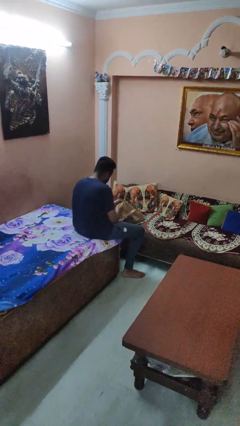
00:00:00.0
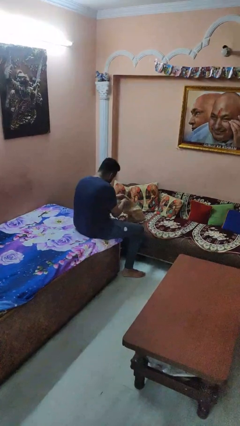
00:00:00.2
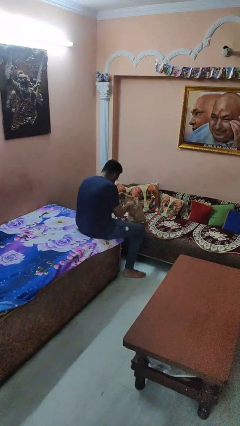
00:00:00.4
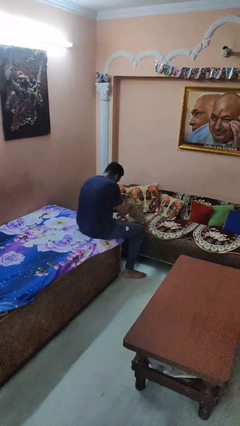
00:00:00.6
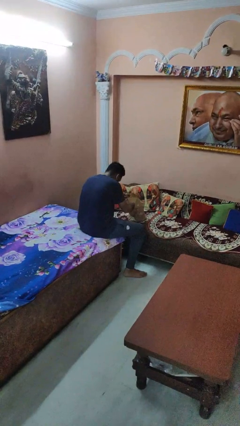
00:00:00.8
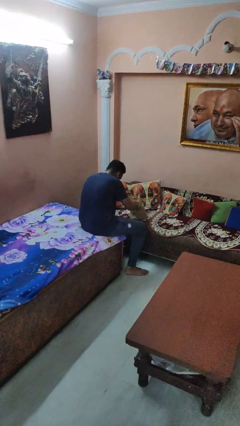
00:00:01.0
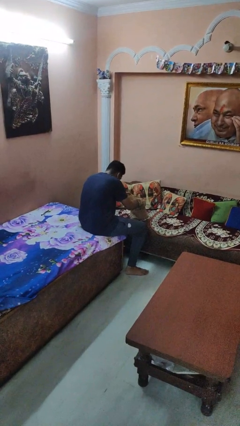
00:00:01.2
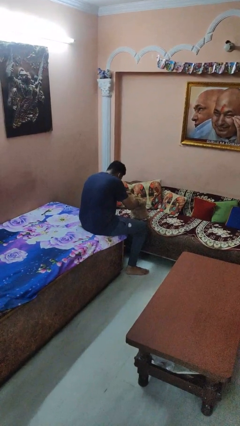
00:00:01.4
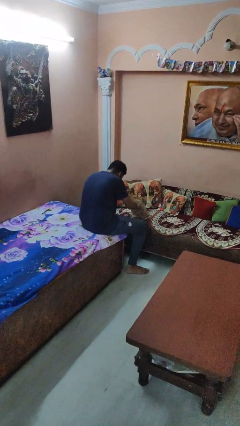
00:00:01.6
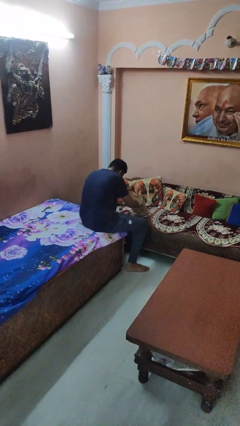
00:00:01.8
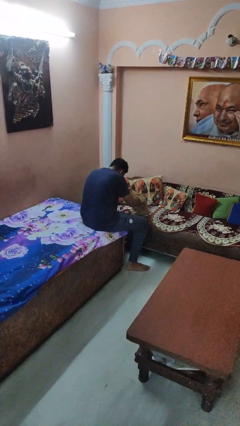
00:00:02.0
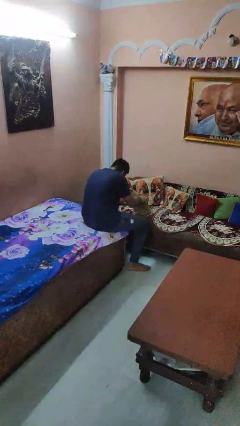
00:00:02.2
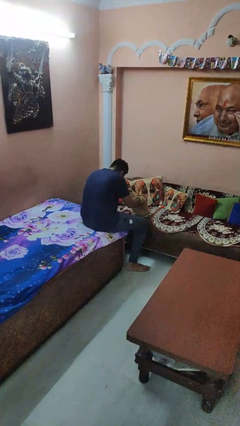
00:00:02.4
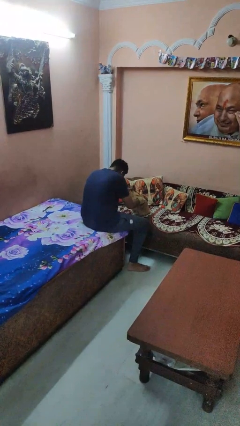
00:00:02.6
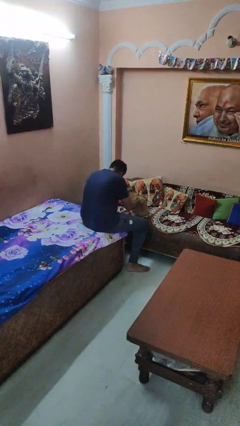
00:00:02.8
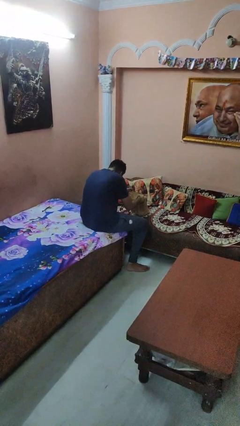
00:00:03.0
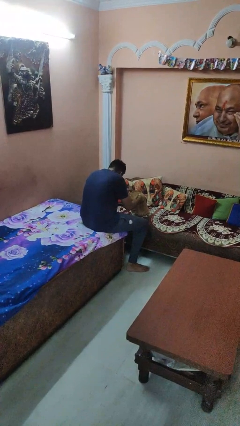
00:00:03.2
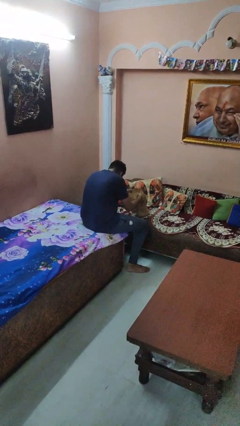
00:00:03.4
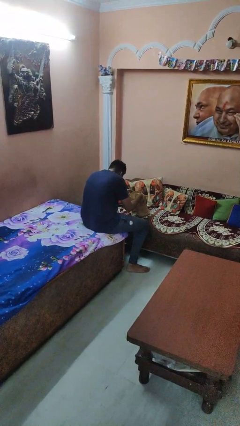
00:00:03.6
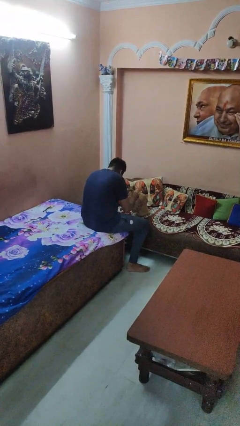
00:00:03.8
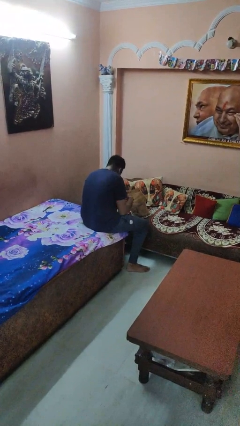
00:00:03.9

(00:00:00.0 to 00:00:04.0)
person searches in bag

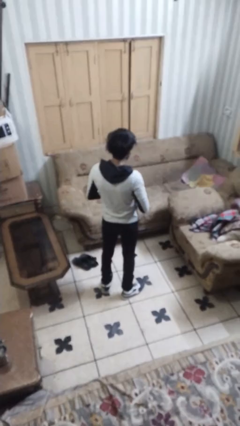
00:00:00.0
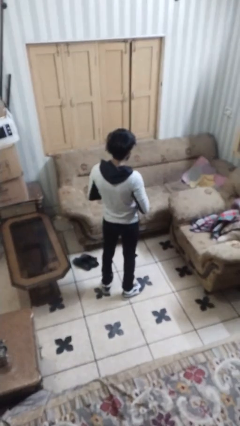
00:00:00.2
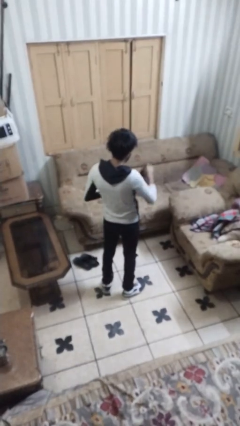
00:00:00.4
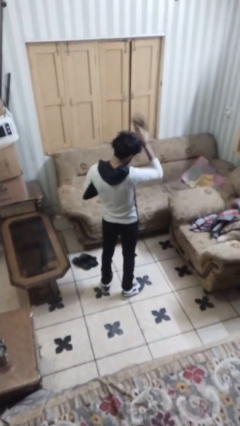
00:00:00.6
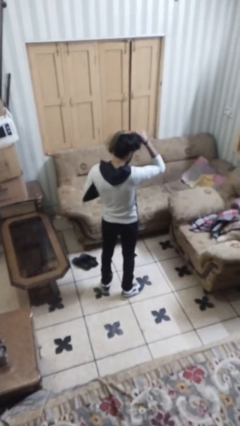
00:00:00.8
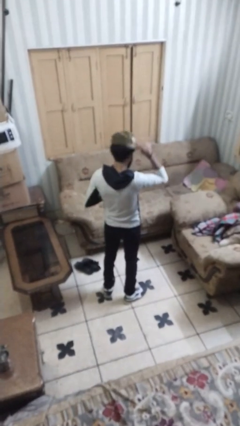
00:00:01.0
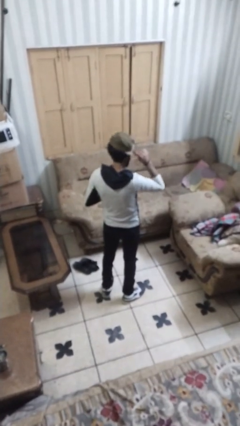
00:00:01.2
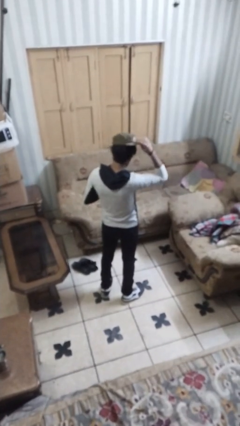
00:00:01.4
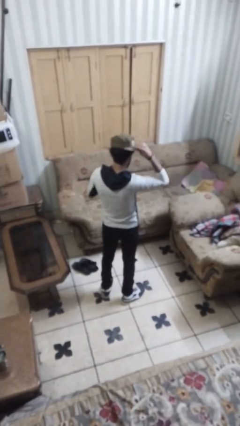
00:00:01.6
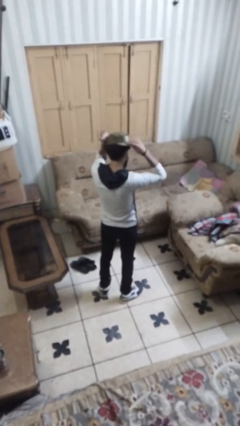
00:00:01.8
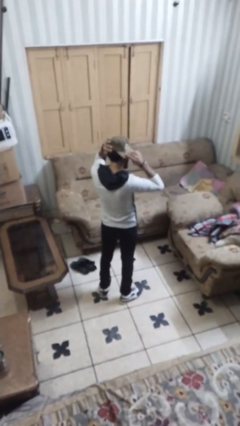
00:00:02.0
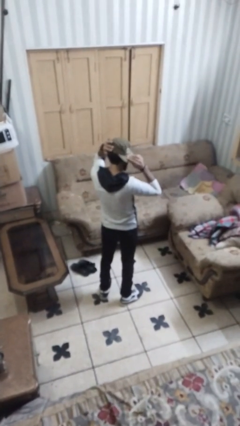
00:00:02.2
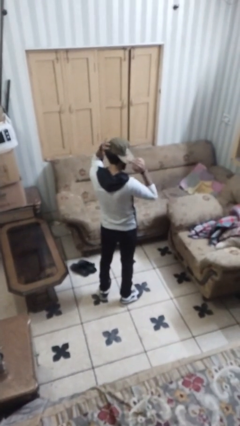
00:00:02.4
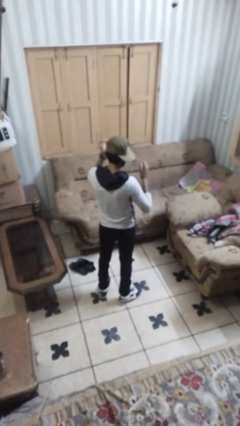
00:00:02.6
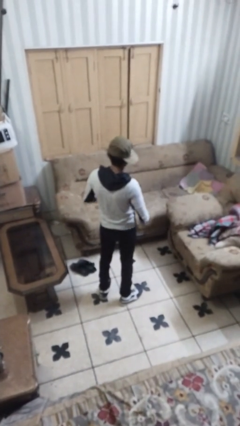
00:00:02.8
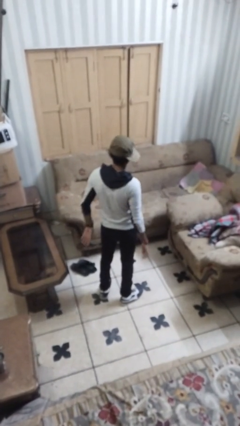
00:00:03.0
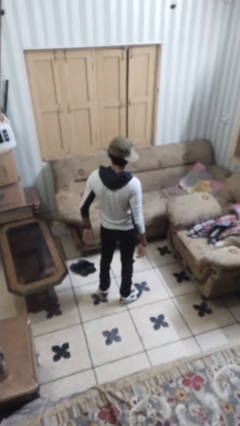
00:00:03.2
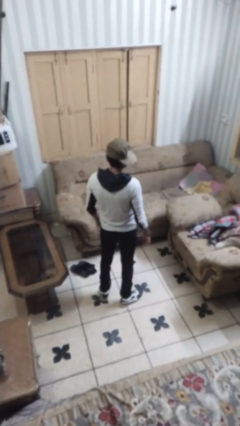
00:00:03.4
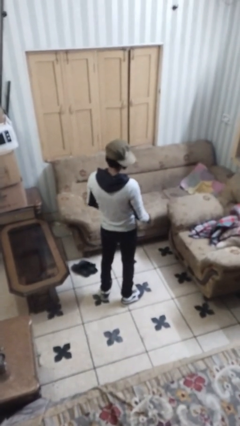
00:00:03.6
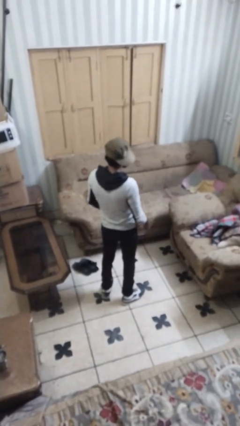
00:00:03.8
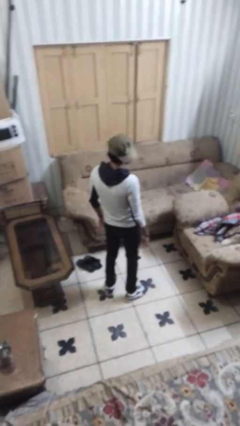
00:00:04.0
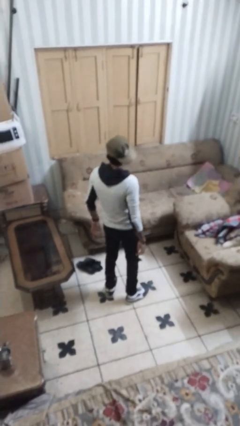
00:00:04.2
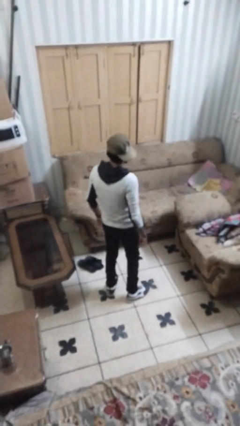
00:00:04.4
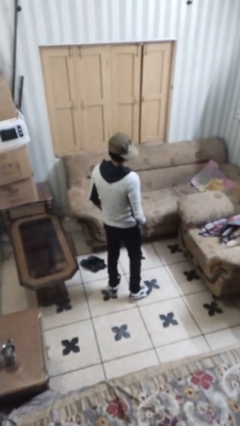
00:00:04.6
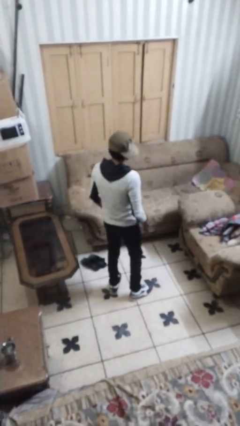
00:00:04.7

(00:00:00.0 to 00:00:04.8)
person puts on hat

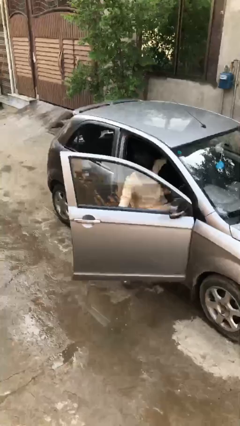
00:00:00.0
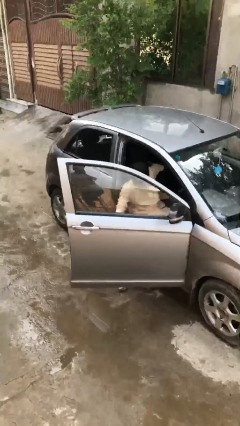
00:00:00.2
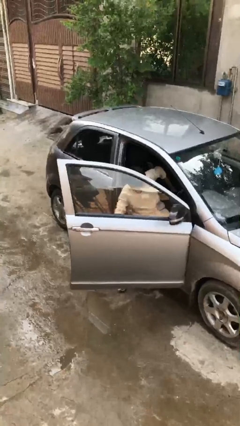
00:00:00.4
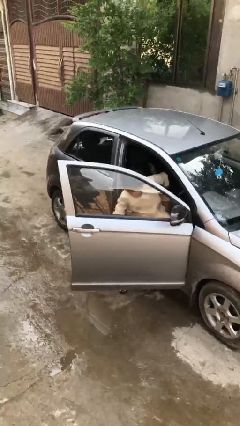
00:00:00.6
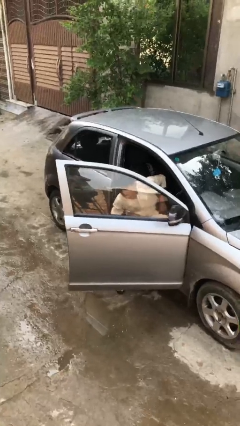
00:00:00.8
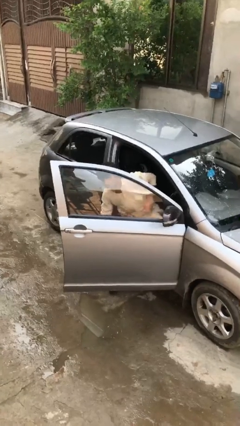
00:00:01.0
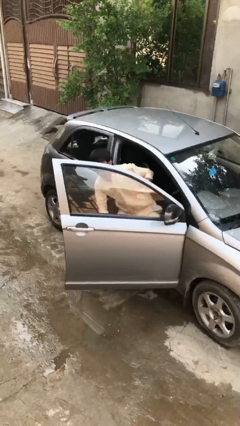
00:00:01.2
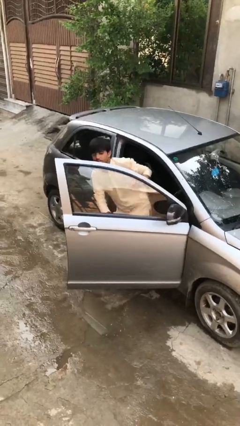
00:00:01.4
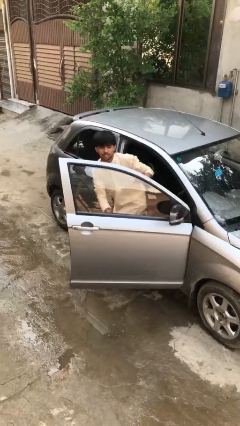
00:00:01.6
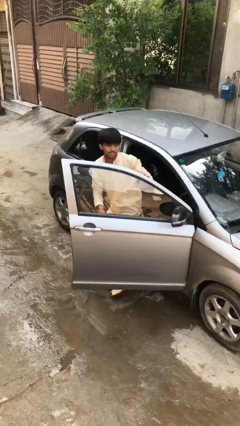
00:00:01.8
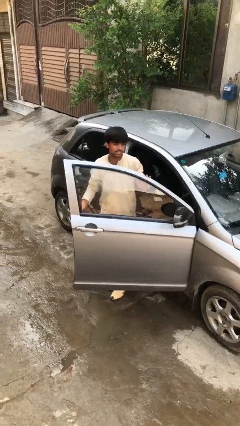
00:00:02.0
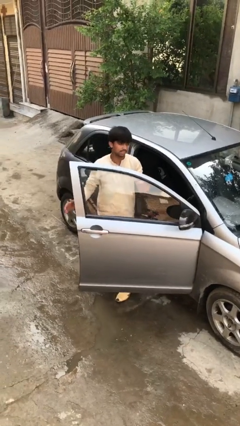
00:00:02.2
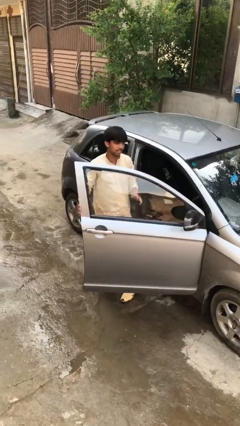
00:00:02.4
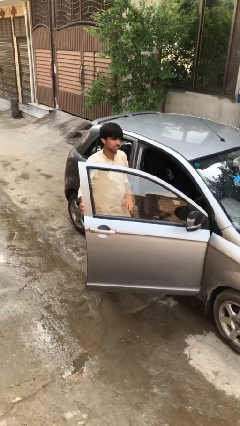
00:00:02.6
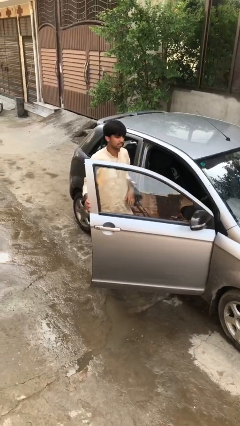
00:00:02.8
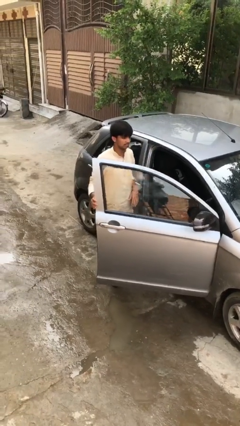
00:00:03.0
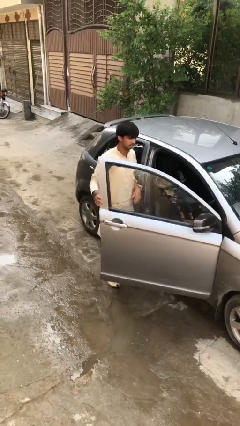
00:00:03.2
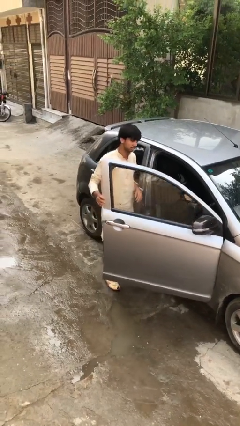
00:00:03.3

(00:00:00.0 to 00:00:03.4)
person exits car

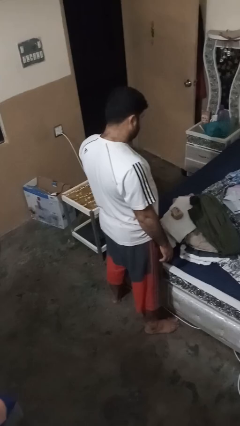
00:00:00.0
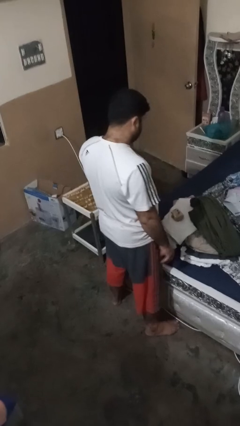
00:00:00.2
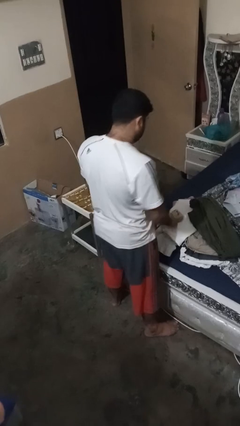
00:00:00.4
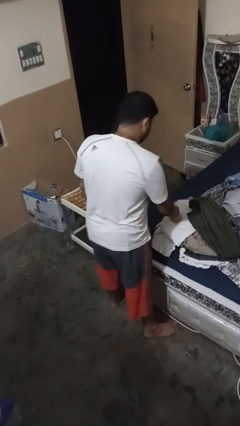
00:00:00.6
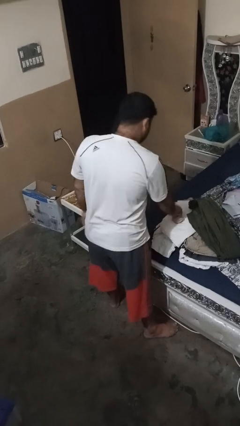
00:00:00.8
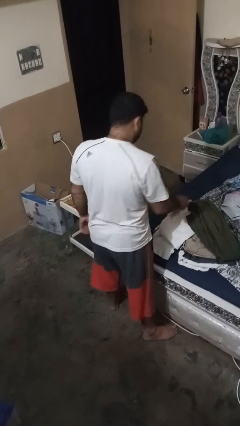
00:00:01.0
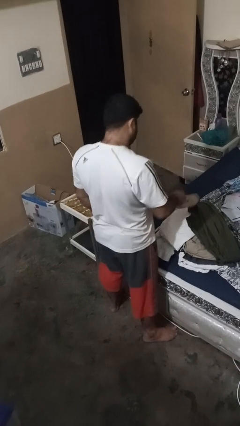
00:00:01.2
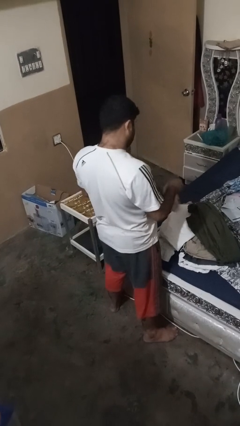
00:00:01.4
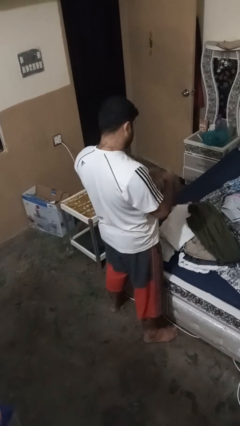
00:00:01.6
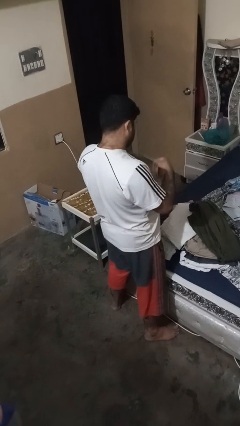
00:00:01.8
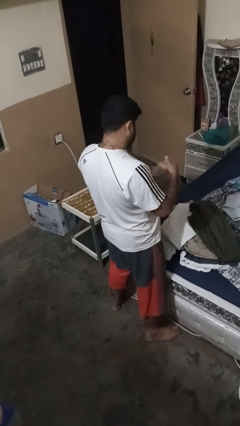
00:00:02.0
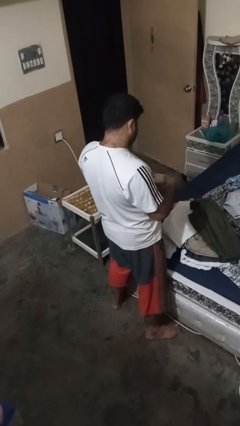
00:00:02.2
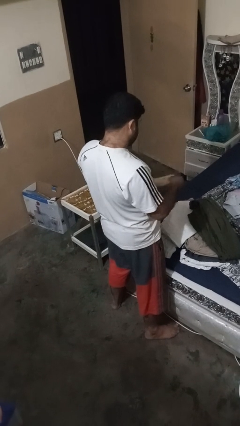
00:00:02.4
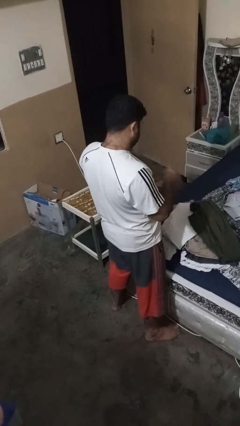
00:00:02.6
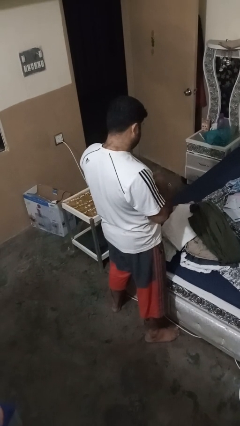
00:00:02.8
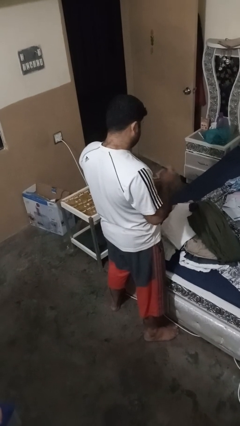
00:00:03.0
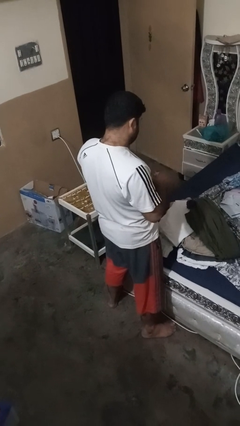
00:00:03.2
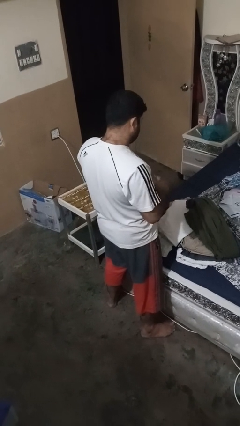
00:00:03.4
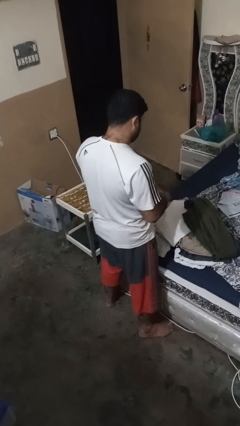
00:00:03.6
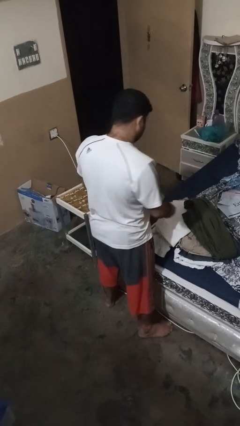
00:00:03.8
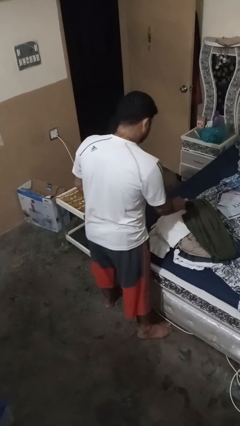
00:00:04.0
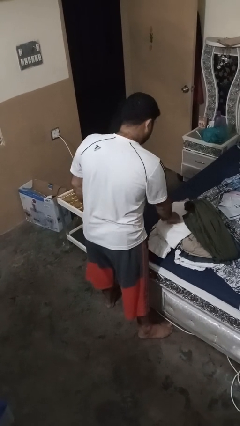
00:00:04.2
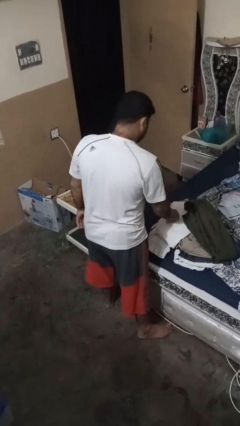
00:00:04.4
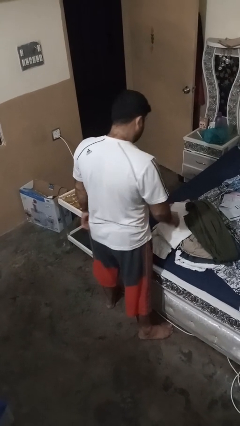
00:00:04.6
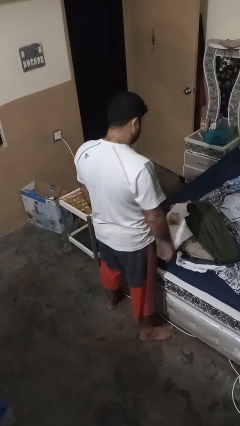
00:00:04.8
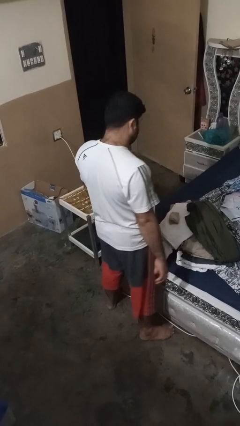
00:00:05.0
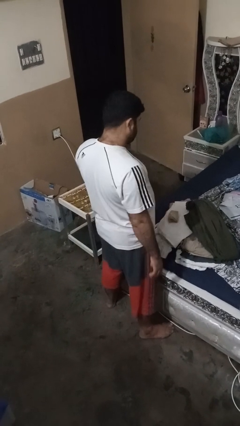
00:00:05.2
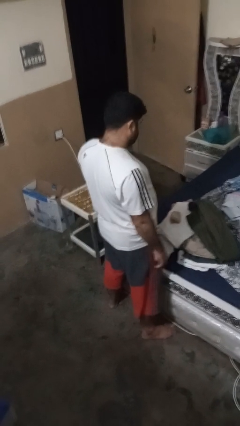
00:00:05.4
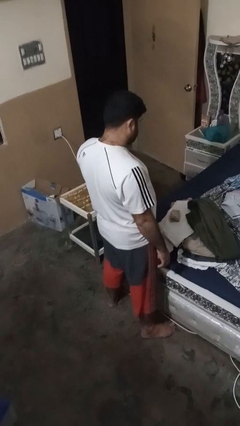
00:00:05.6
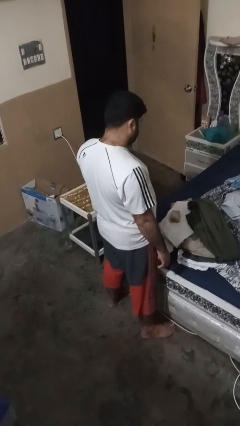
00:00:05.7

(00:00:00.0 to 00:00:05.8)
person folds socks
